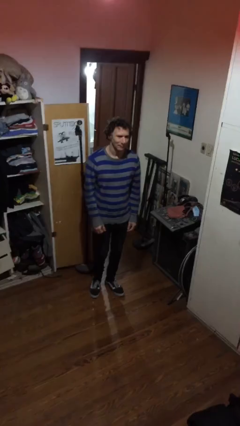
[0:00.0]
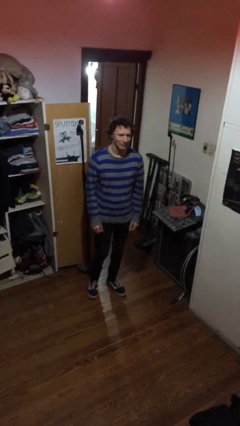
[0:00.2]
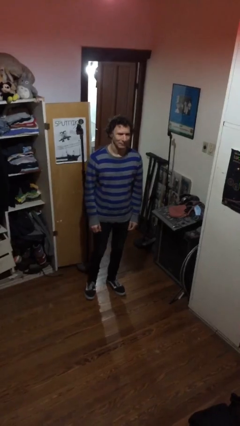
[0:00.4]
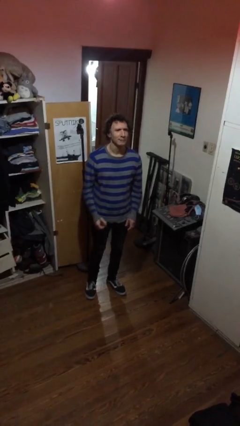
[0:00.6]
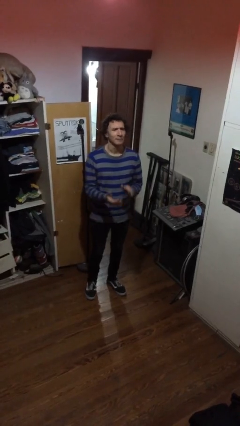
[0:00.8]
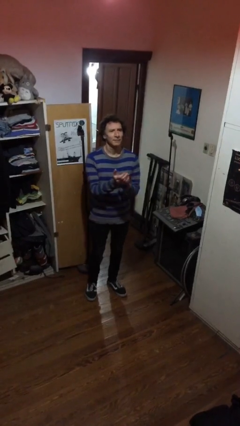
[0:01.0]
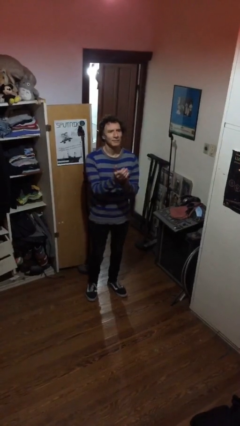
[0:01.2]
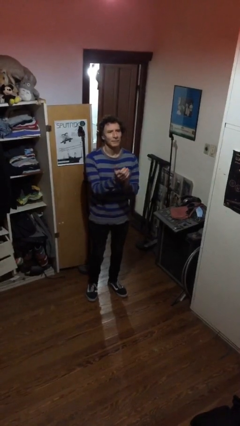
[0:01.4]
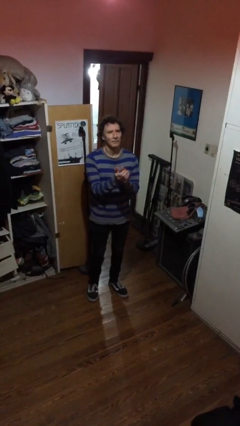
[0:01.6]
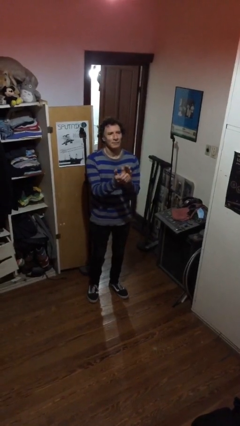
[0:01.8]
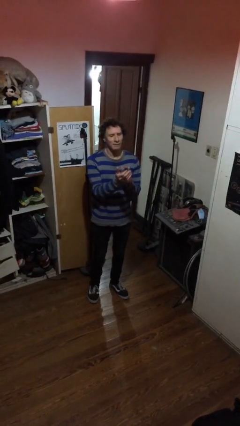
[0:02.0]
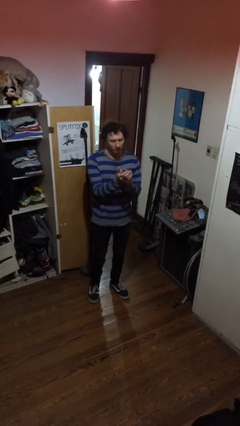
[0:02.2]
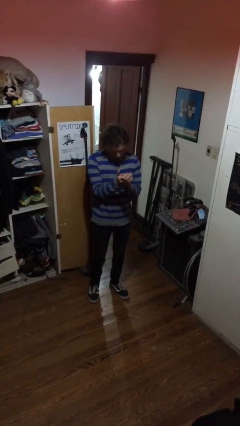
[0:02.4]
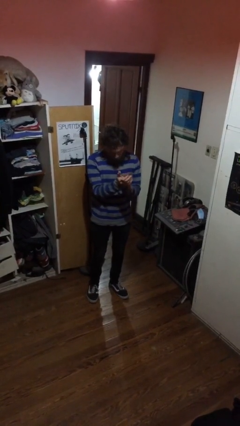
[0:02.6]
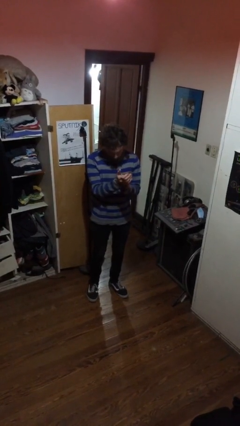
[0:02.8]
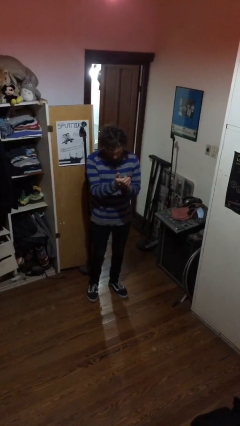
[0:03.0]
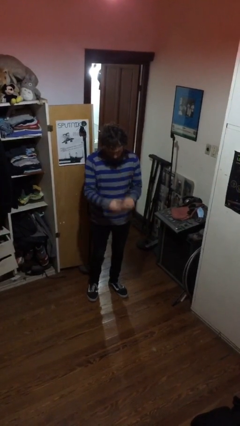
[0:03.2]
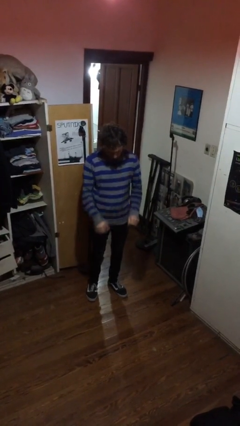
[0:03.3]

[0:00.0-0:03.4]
person claps hands

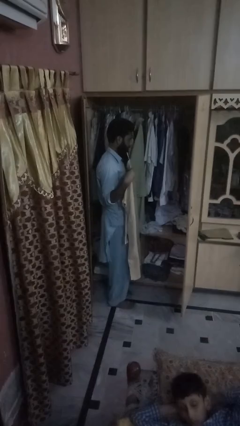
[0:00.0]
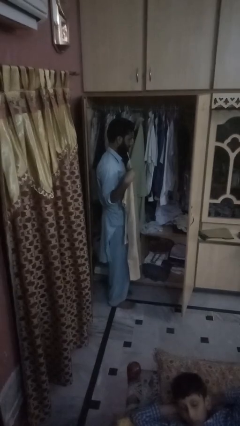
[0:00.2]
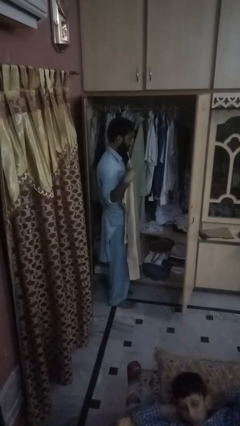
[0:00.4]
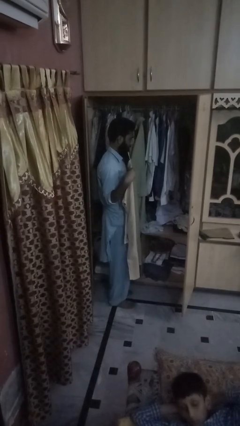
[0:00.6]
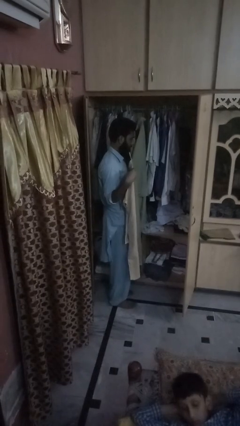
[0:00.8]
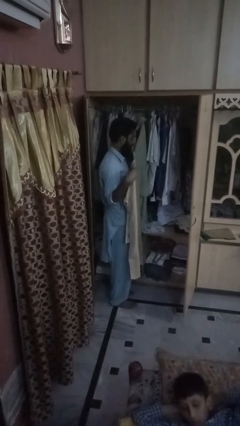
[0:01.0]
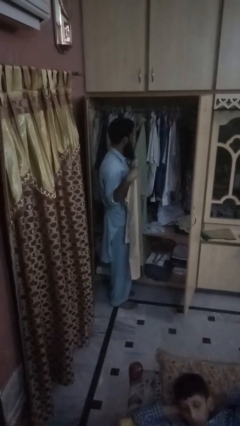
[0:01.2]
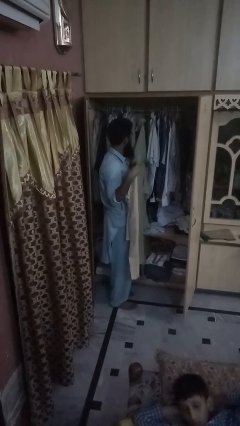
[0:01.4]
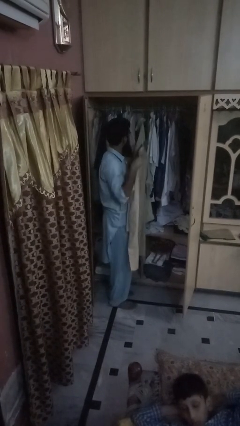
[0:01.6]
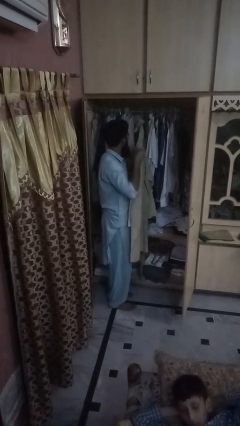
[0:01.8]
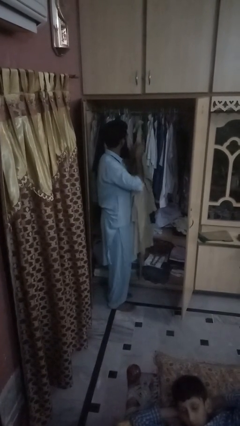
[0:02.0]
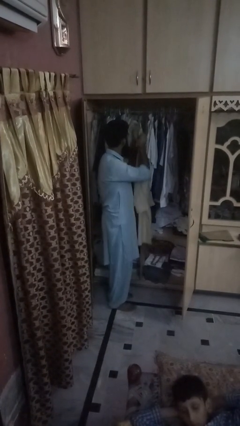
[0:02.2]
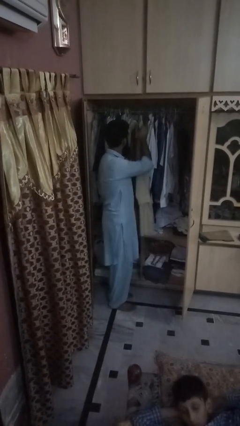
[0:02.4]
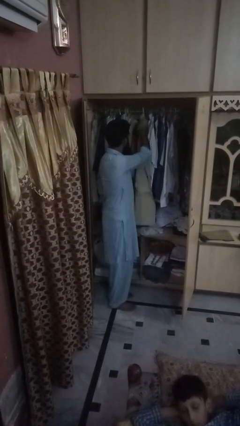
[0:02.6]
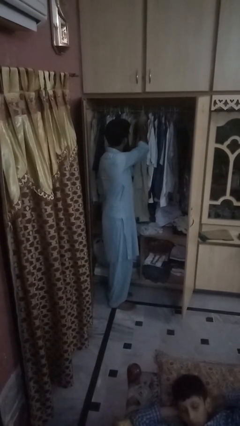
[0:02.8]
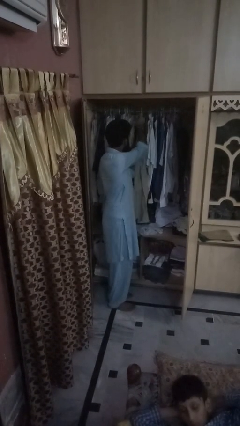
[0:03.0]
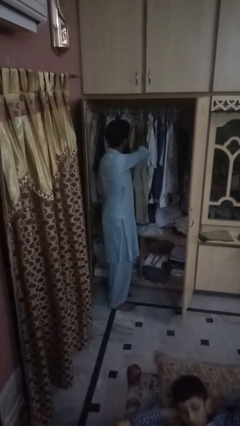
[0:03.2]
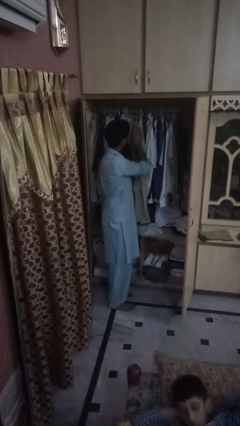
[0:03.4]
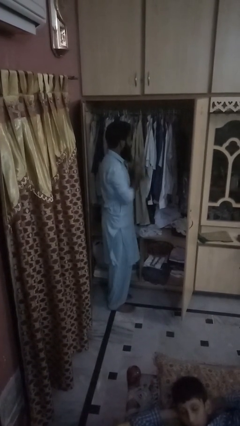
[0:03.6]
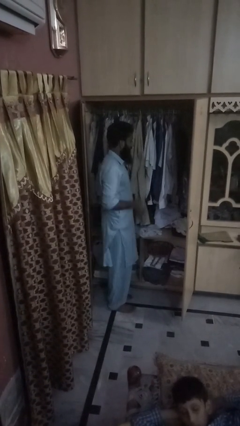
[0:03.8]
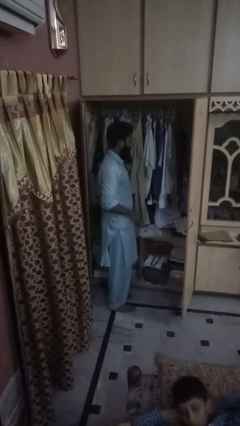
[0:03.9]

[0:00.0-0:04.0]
person takes clothes from closet

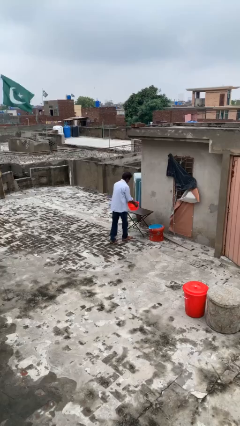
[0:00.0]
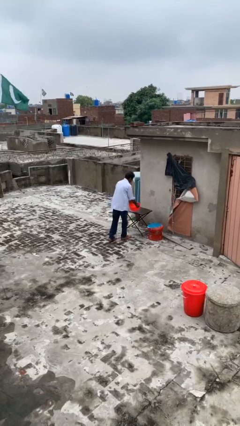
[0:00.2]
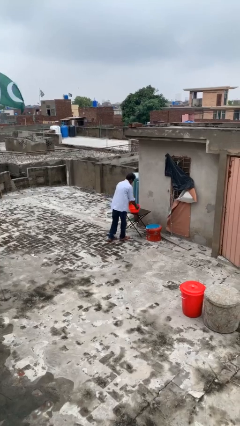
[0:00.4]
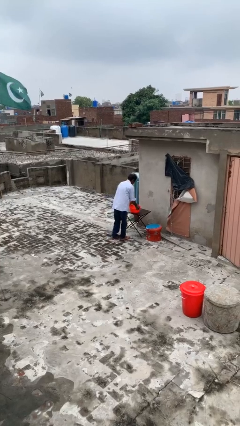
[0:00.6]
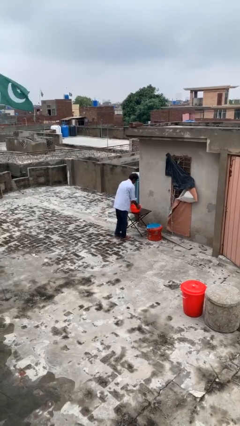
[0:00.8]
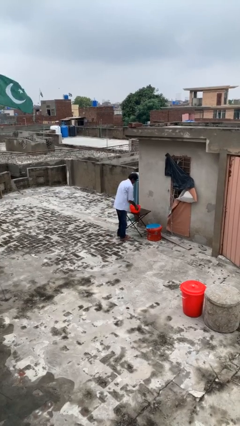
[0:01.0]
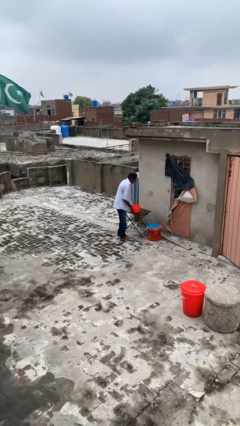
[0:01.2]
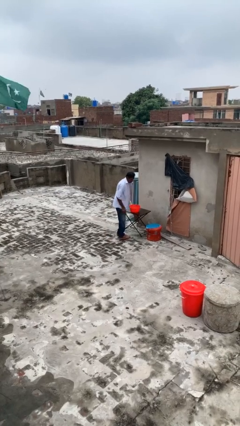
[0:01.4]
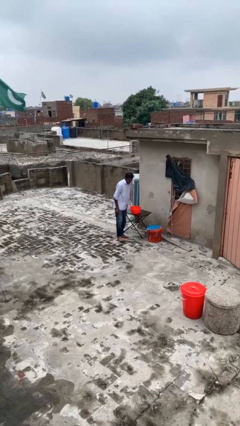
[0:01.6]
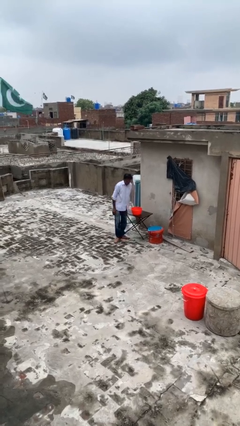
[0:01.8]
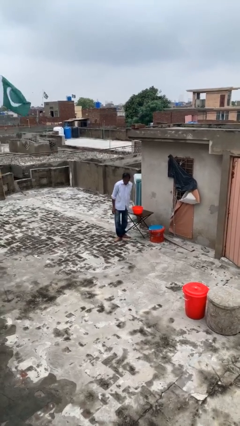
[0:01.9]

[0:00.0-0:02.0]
person puts down object on table

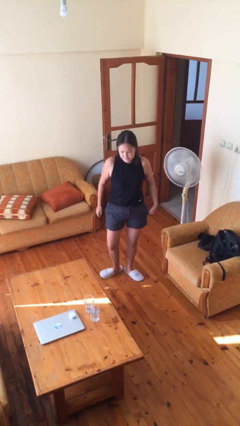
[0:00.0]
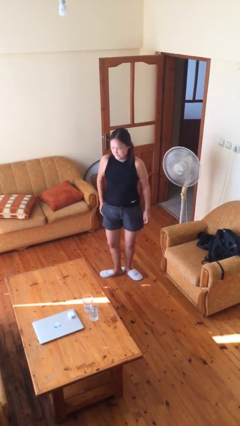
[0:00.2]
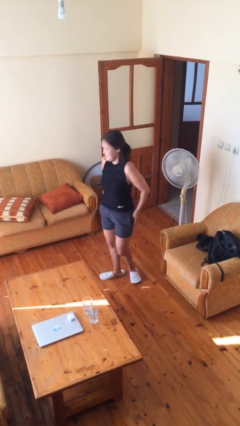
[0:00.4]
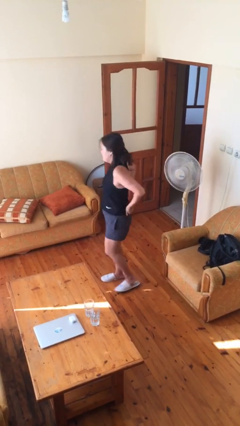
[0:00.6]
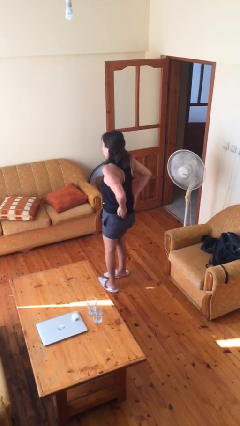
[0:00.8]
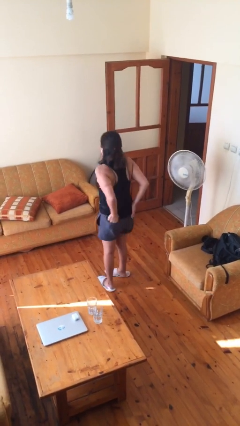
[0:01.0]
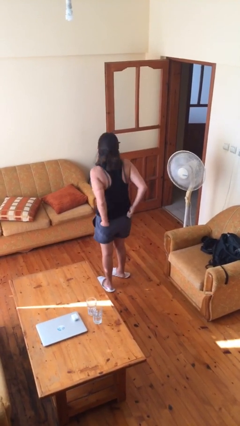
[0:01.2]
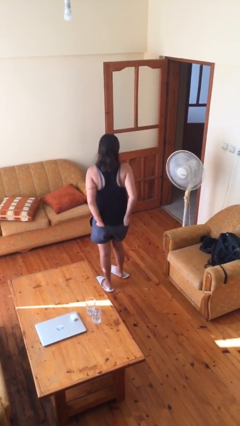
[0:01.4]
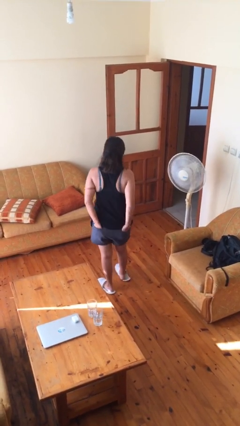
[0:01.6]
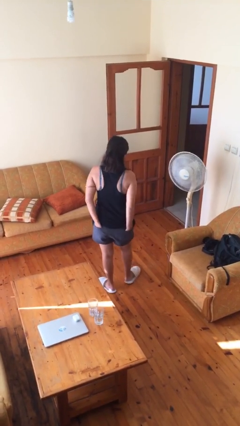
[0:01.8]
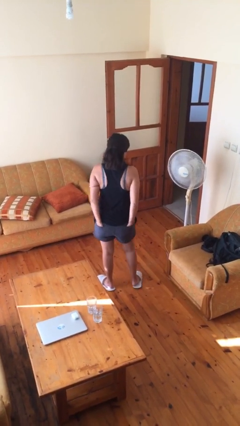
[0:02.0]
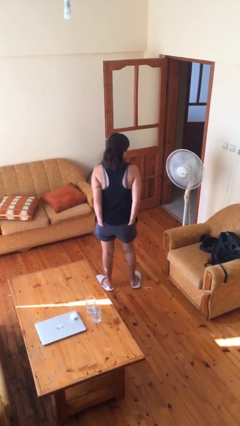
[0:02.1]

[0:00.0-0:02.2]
person puts hands in back pockets

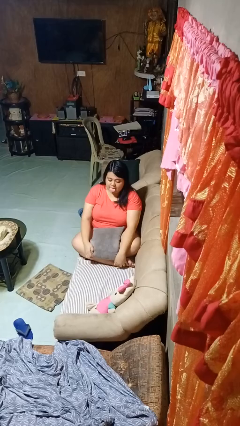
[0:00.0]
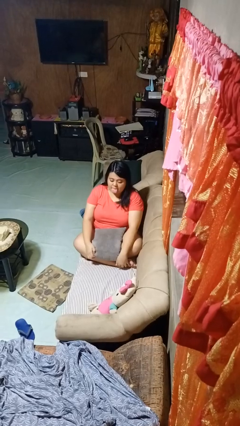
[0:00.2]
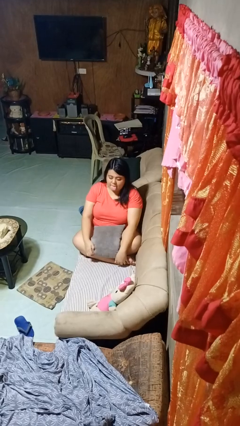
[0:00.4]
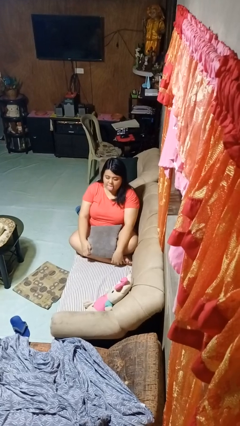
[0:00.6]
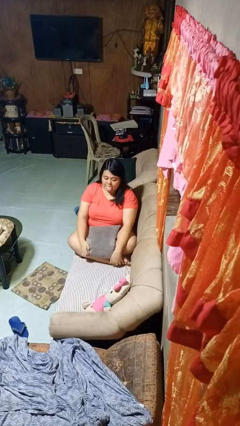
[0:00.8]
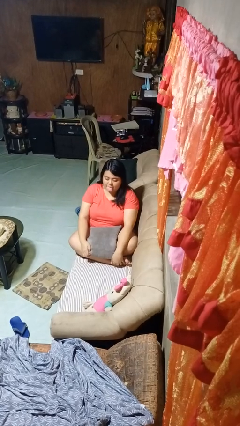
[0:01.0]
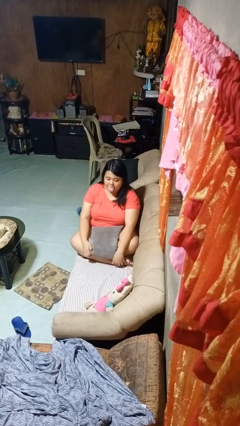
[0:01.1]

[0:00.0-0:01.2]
person sticks out tongue

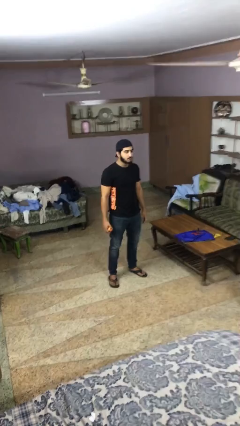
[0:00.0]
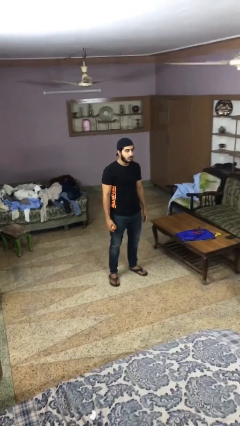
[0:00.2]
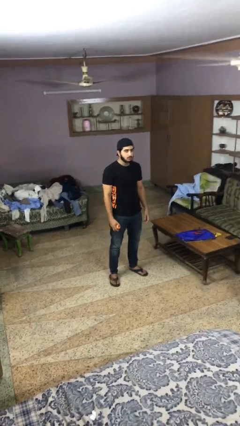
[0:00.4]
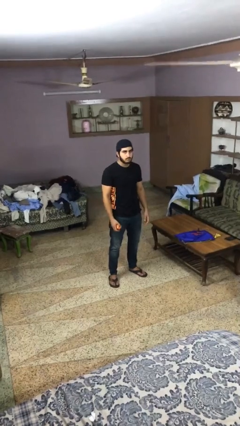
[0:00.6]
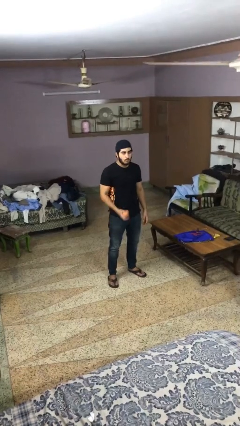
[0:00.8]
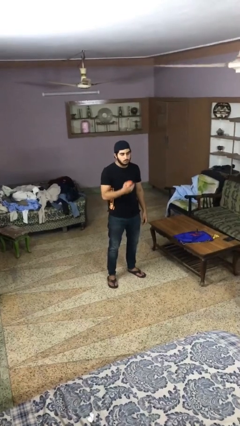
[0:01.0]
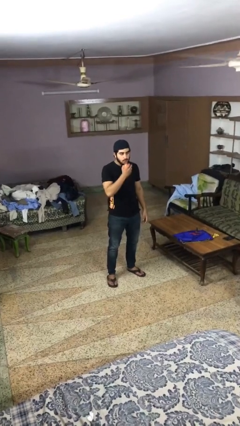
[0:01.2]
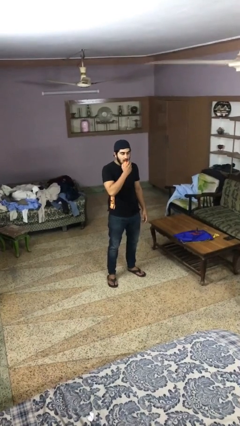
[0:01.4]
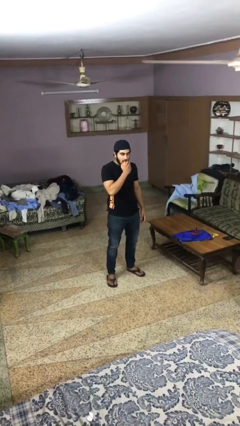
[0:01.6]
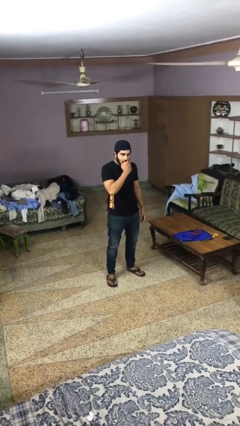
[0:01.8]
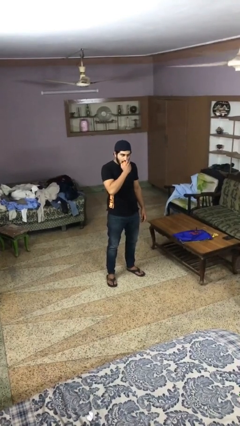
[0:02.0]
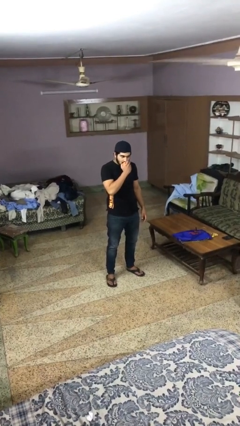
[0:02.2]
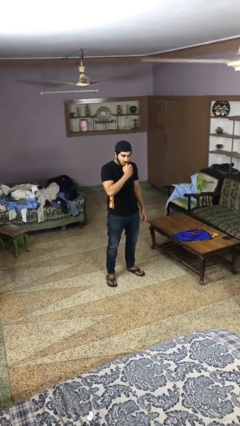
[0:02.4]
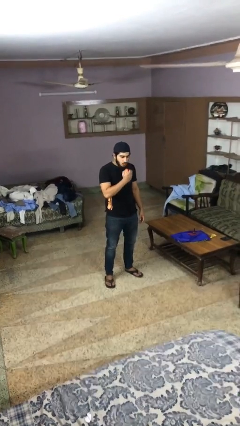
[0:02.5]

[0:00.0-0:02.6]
person eats apple

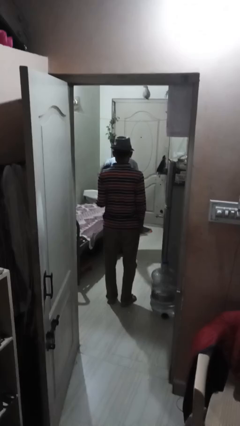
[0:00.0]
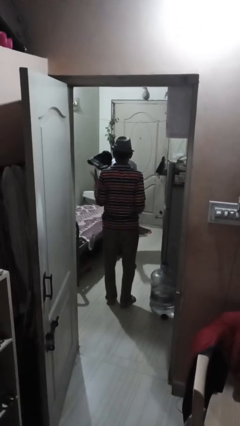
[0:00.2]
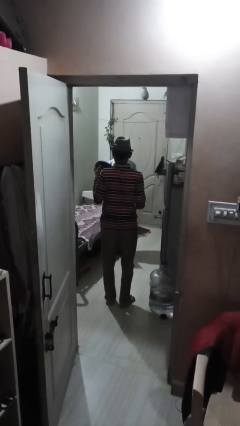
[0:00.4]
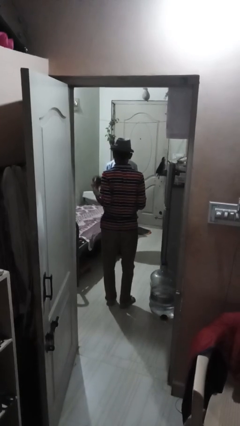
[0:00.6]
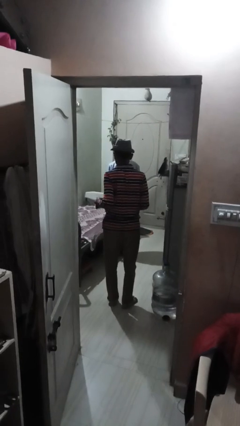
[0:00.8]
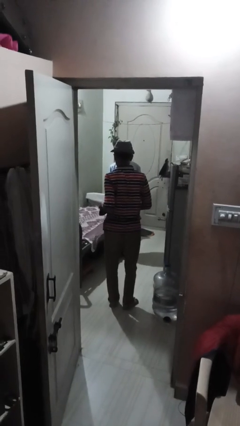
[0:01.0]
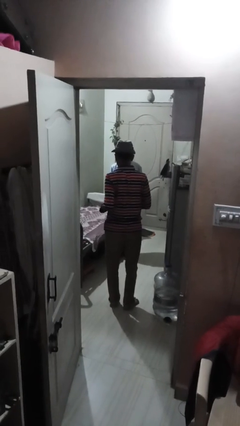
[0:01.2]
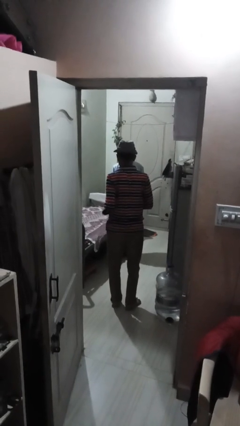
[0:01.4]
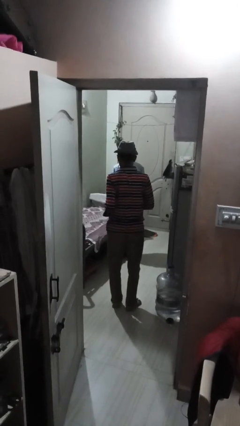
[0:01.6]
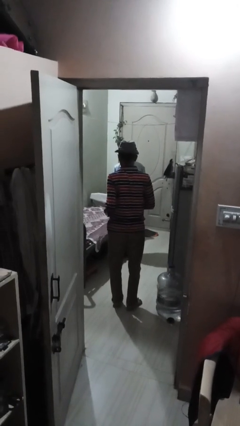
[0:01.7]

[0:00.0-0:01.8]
person catches object from person
